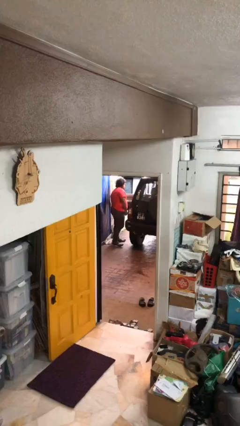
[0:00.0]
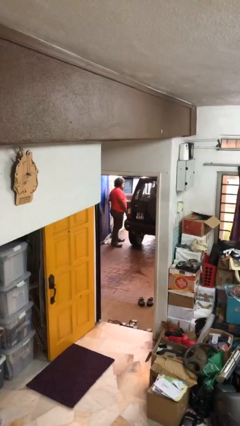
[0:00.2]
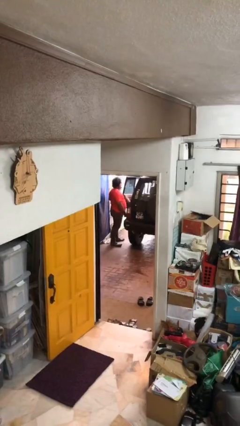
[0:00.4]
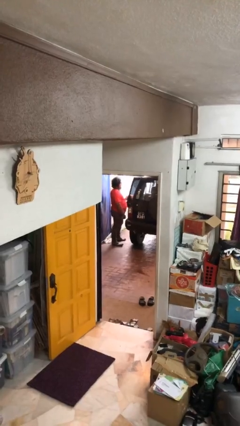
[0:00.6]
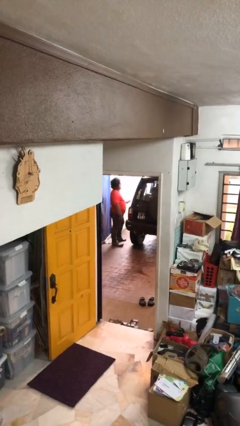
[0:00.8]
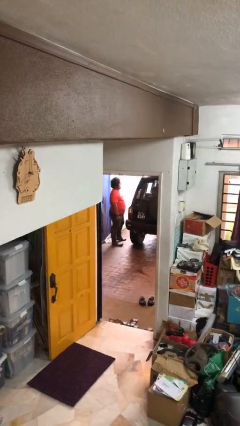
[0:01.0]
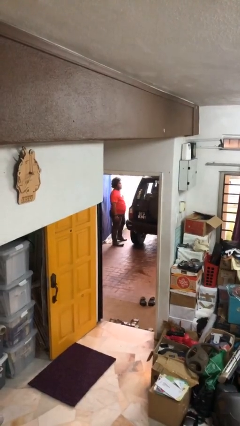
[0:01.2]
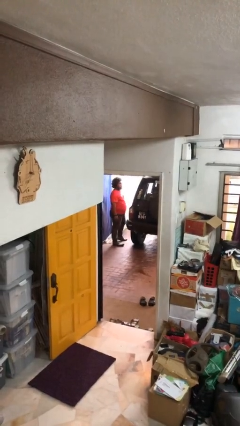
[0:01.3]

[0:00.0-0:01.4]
person closes car door

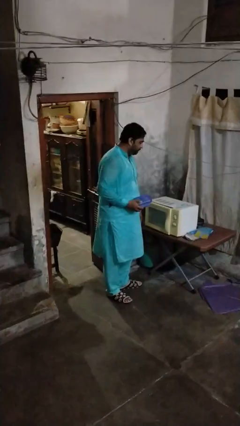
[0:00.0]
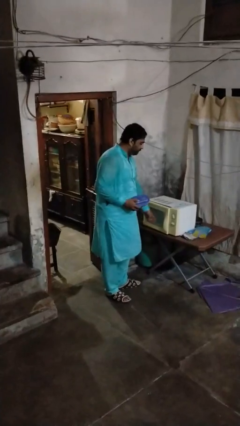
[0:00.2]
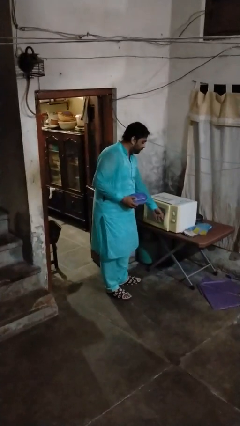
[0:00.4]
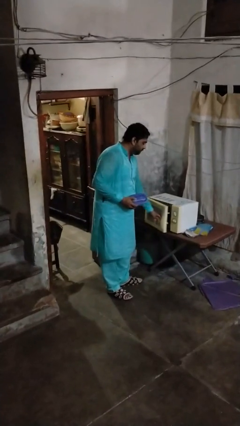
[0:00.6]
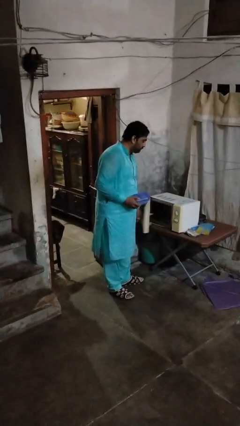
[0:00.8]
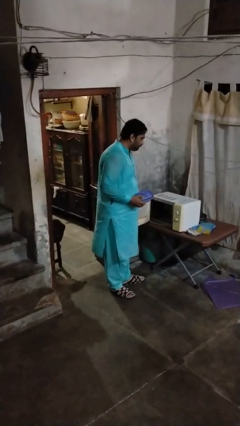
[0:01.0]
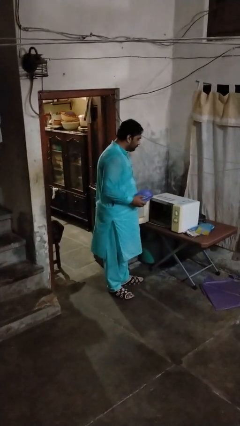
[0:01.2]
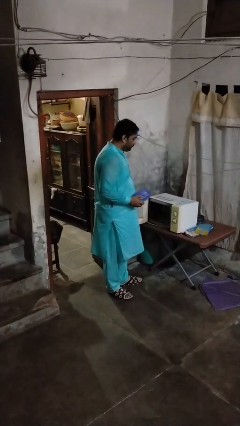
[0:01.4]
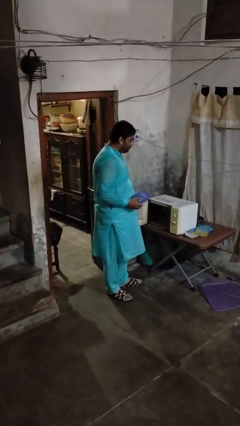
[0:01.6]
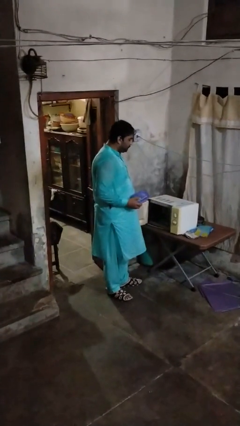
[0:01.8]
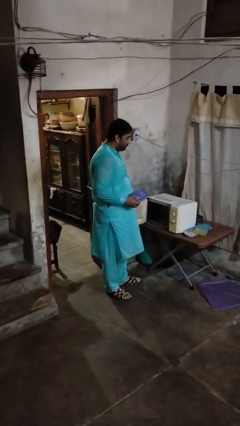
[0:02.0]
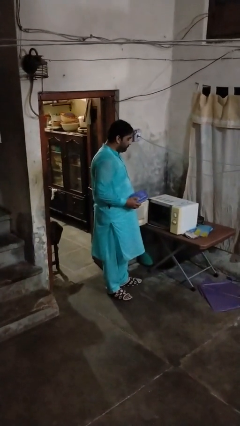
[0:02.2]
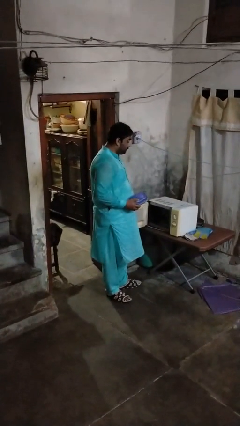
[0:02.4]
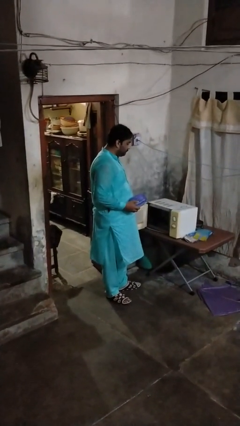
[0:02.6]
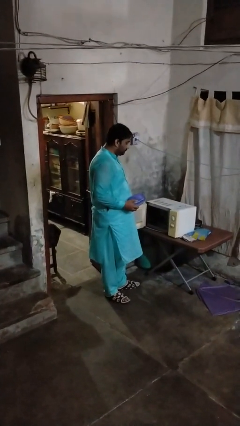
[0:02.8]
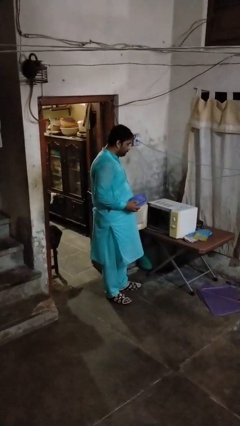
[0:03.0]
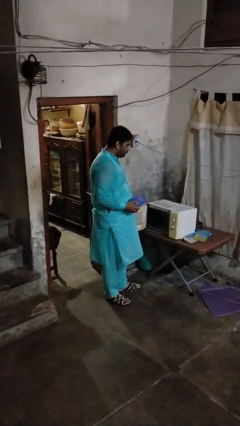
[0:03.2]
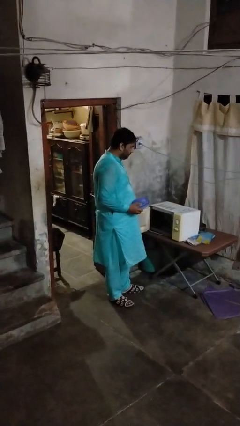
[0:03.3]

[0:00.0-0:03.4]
person opens microwave

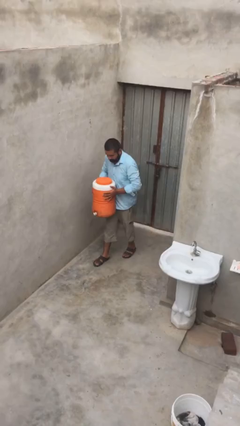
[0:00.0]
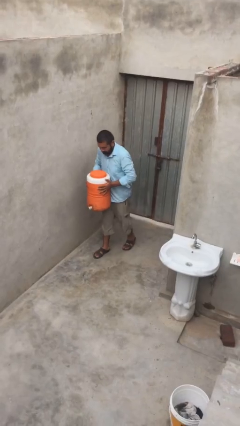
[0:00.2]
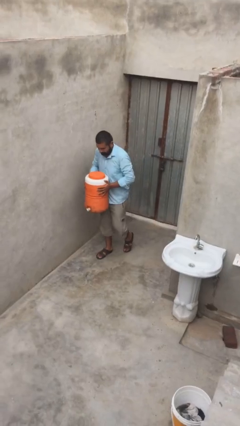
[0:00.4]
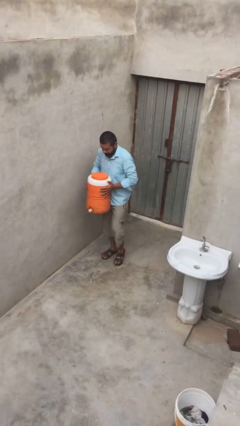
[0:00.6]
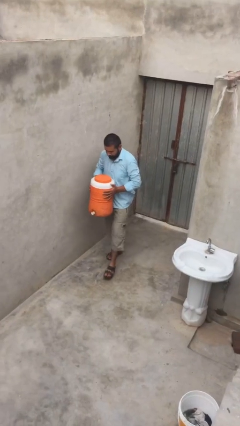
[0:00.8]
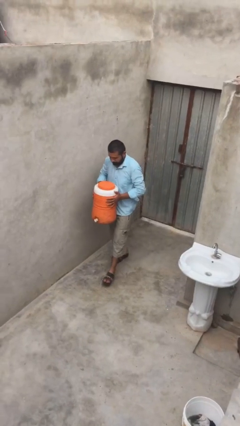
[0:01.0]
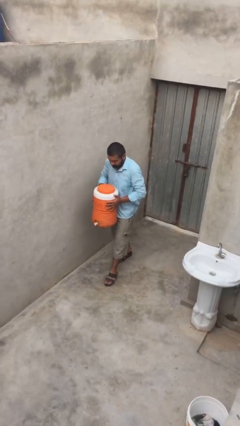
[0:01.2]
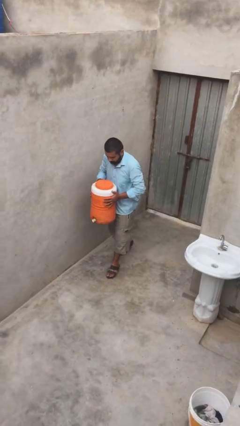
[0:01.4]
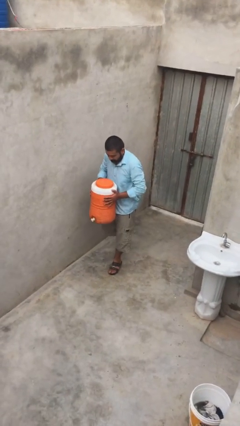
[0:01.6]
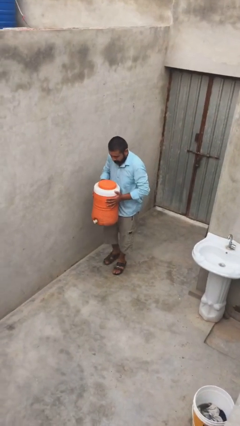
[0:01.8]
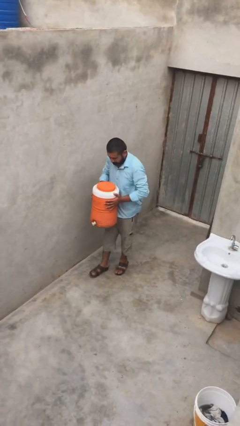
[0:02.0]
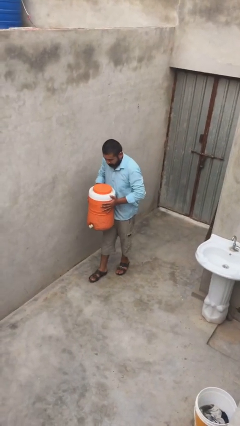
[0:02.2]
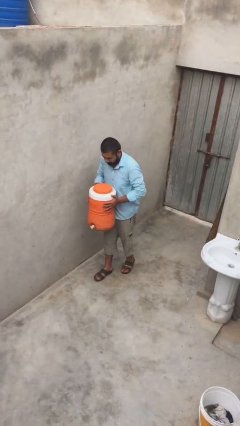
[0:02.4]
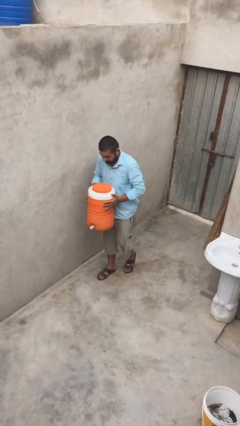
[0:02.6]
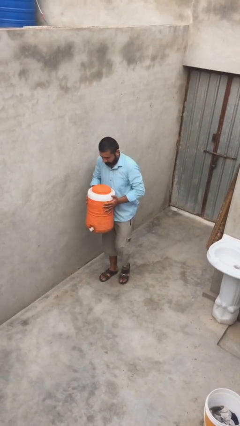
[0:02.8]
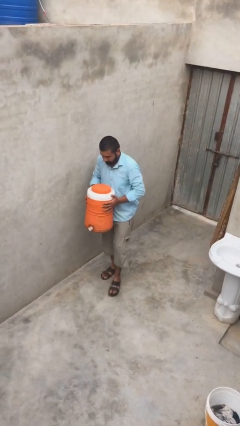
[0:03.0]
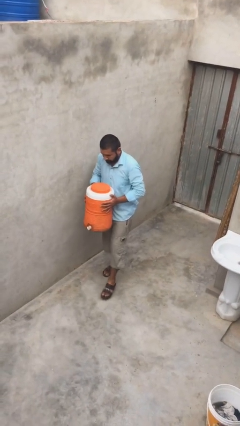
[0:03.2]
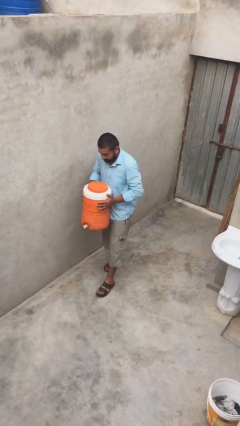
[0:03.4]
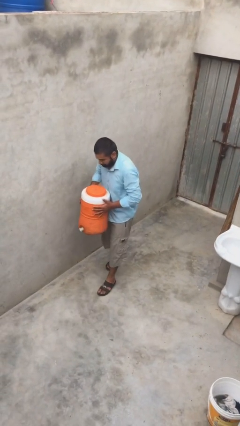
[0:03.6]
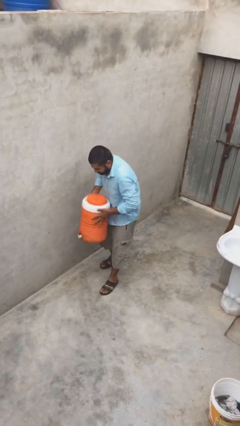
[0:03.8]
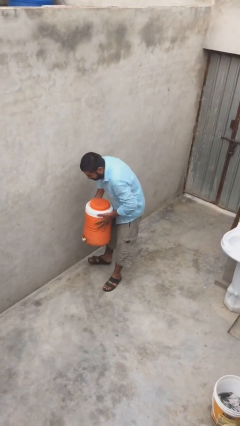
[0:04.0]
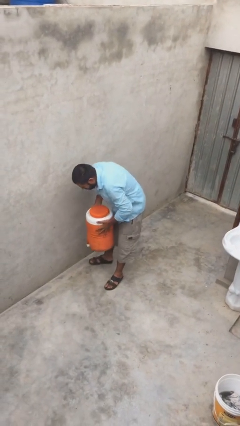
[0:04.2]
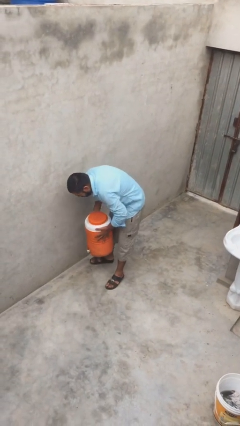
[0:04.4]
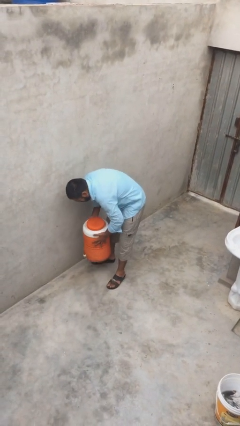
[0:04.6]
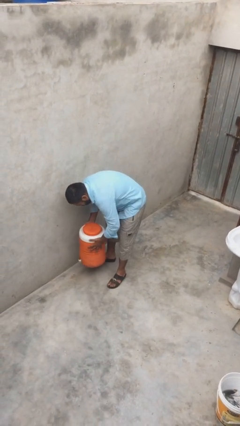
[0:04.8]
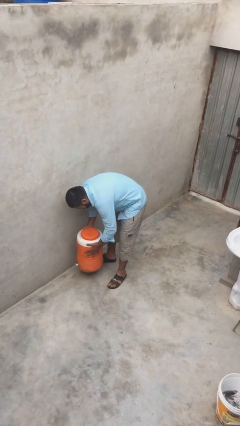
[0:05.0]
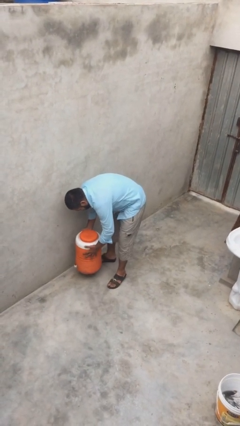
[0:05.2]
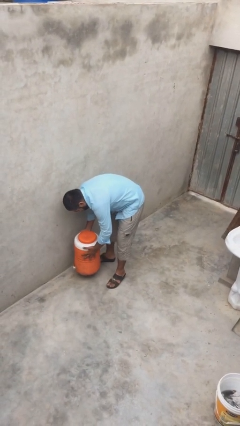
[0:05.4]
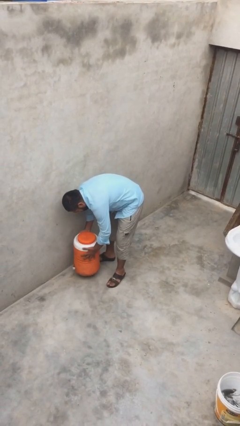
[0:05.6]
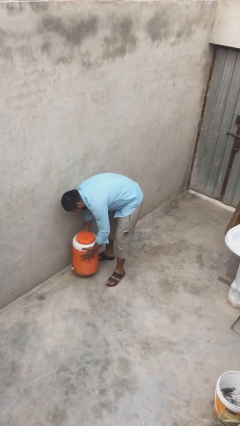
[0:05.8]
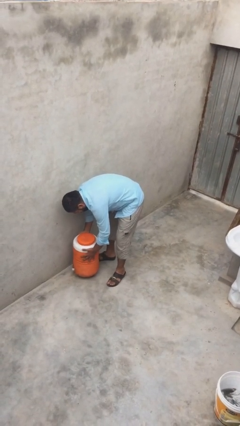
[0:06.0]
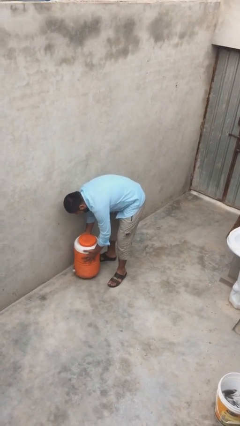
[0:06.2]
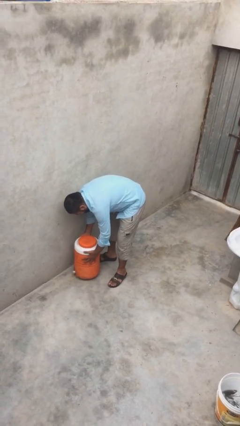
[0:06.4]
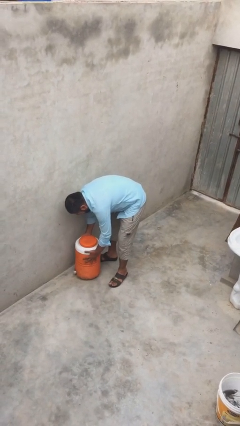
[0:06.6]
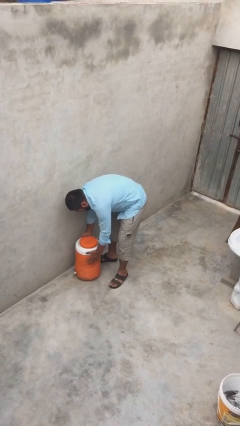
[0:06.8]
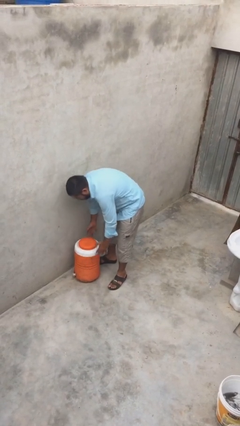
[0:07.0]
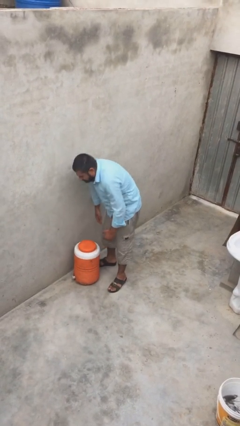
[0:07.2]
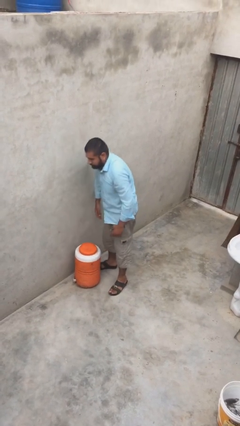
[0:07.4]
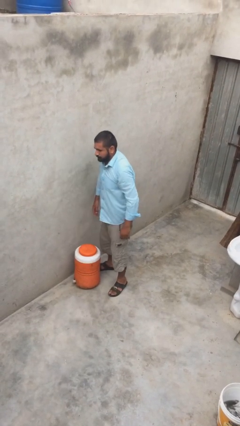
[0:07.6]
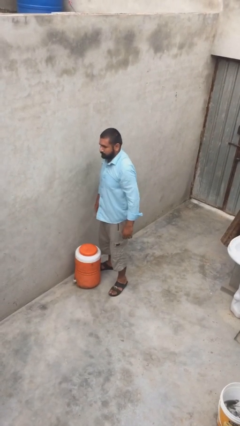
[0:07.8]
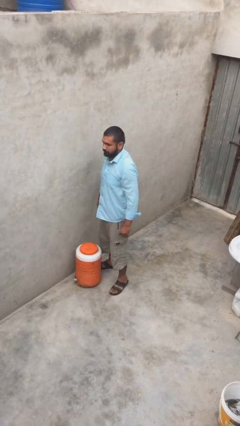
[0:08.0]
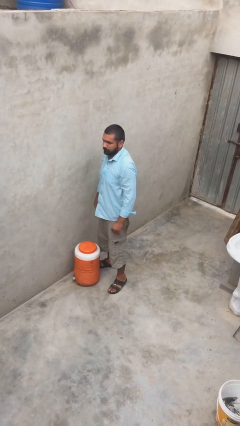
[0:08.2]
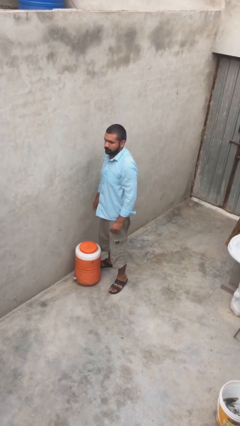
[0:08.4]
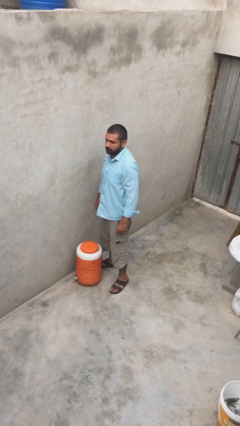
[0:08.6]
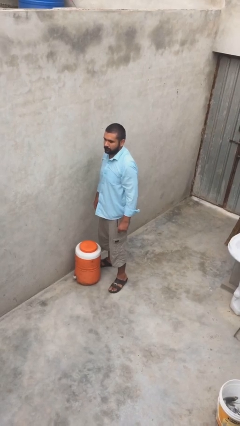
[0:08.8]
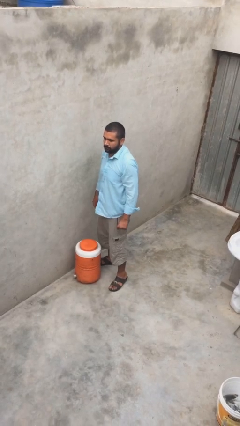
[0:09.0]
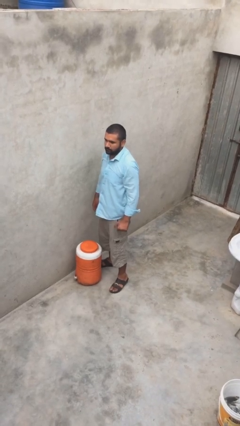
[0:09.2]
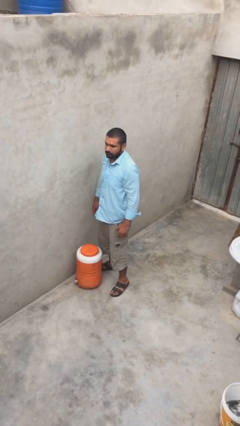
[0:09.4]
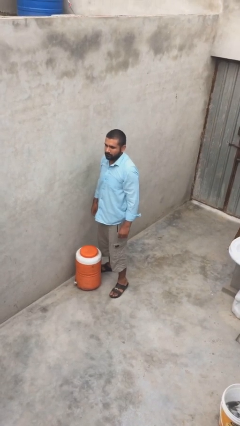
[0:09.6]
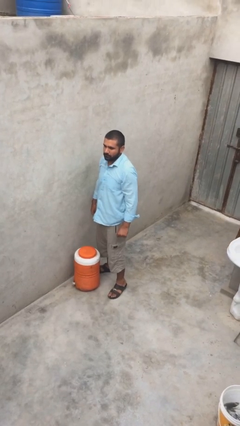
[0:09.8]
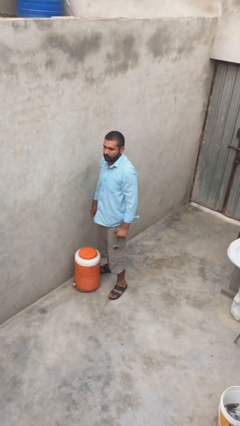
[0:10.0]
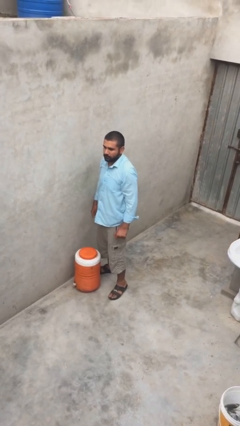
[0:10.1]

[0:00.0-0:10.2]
person puts down object on floor

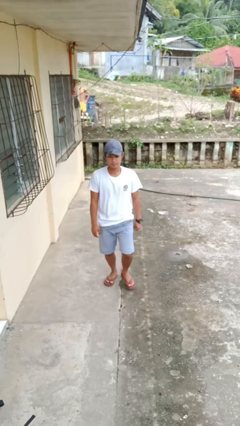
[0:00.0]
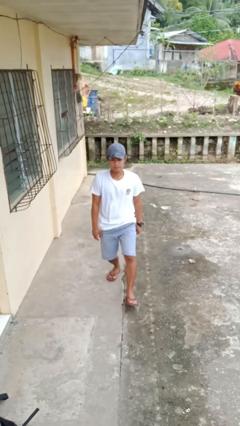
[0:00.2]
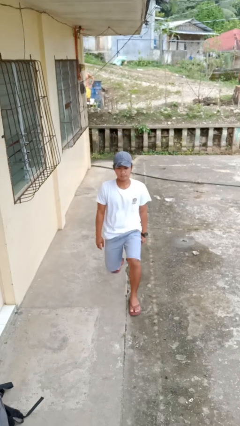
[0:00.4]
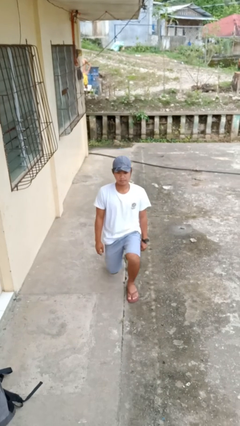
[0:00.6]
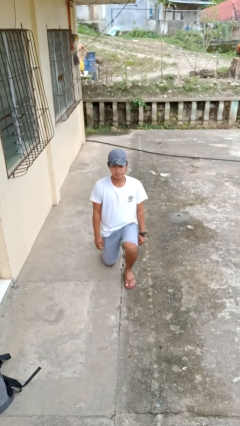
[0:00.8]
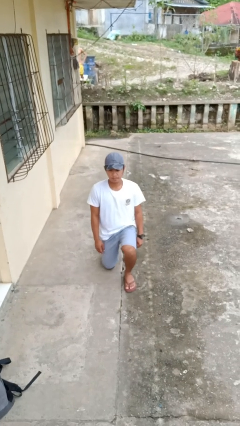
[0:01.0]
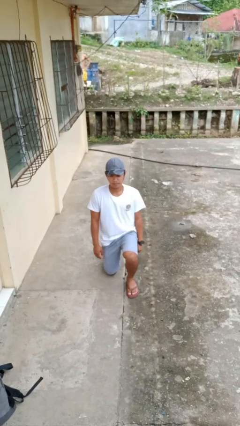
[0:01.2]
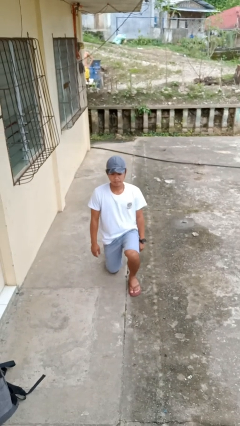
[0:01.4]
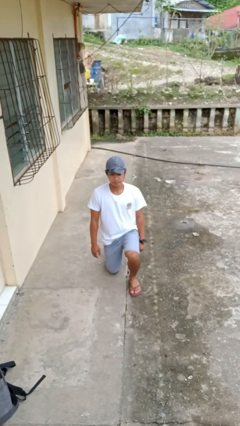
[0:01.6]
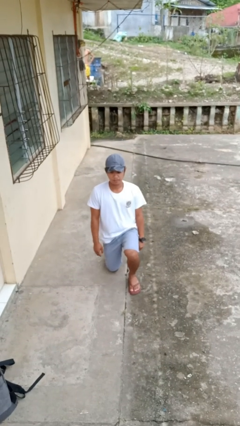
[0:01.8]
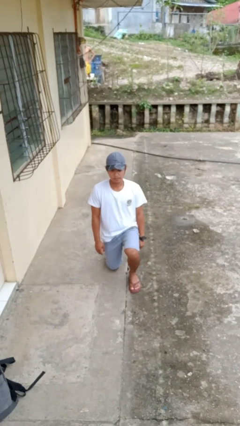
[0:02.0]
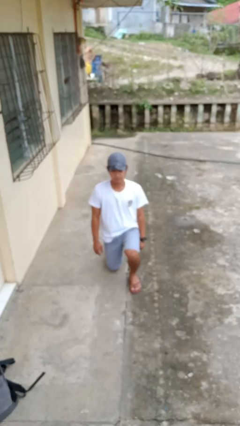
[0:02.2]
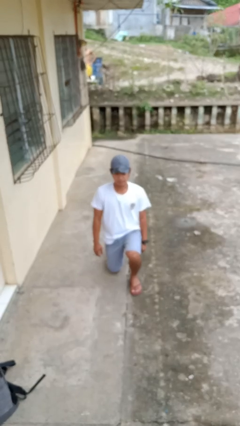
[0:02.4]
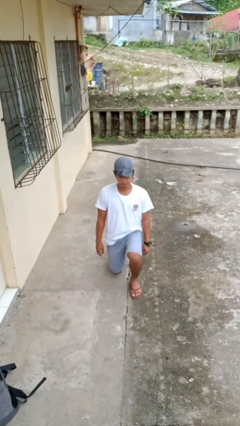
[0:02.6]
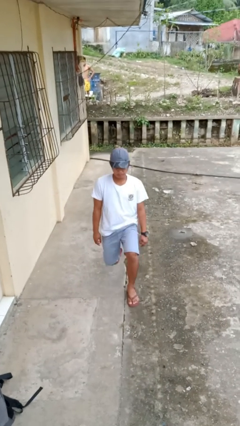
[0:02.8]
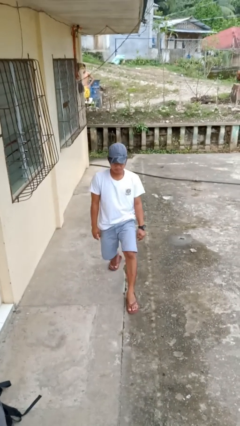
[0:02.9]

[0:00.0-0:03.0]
person kneels
